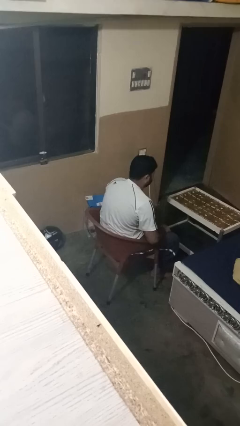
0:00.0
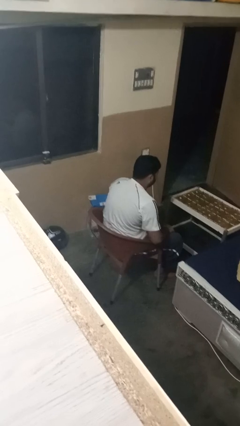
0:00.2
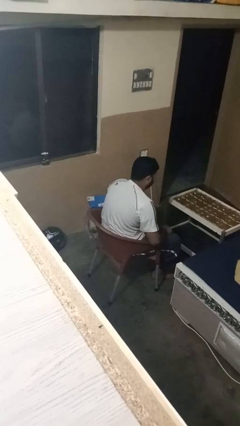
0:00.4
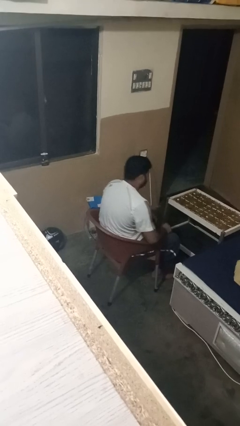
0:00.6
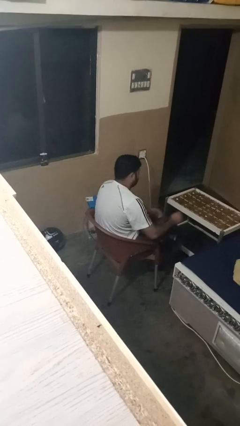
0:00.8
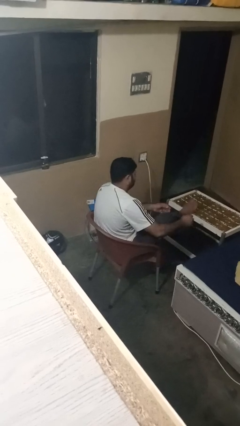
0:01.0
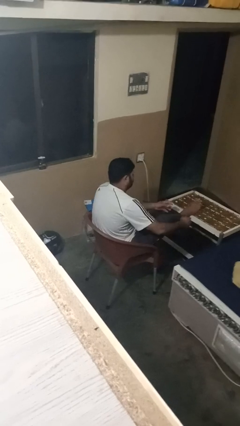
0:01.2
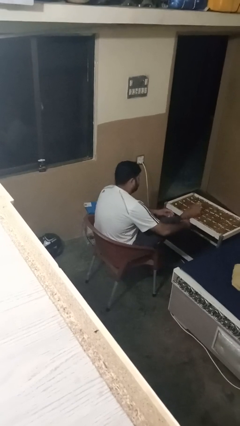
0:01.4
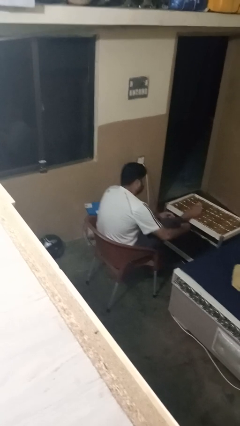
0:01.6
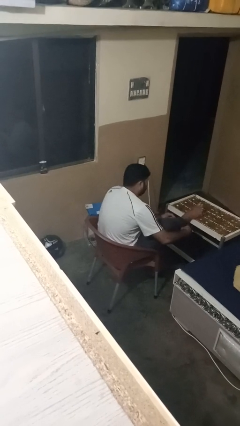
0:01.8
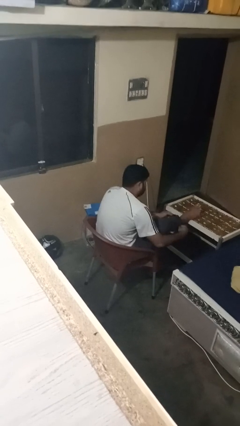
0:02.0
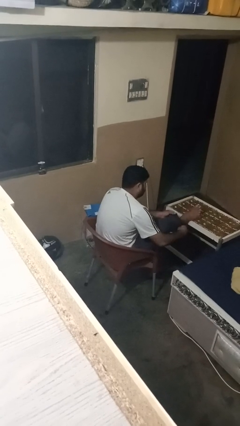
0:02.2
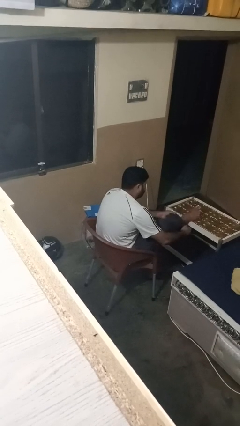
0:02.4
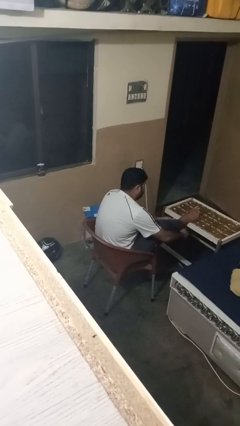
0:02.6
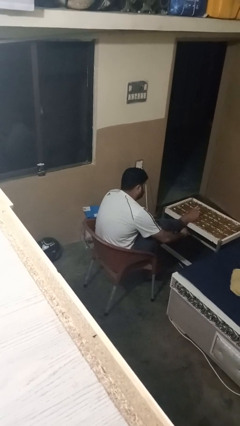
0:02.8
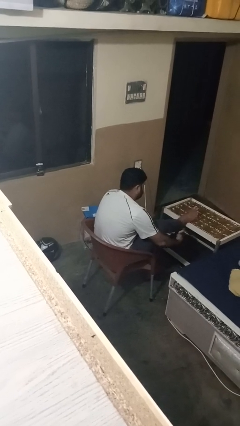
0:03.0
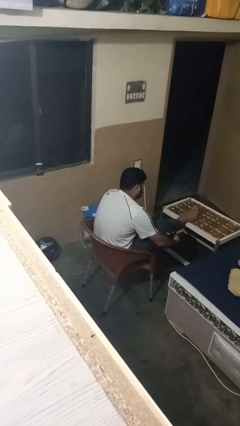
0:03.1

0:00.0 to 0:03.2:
person hikes up pants

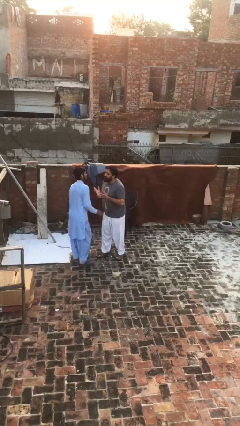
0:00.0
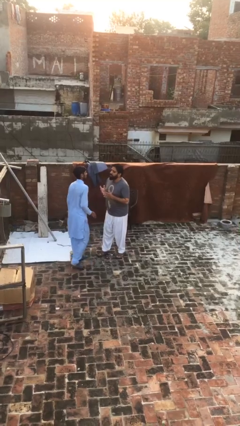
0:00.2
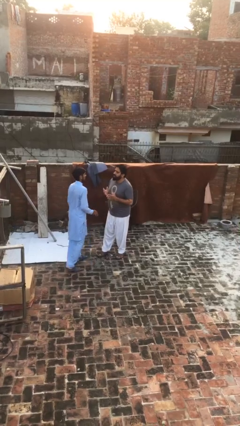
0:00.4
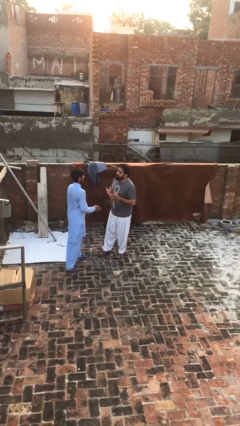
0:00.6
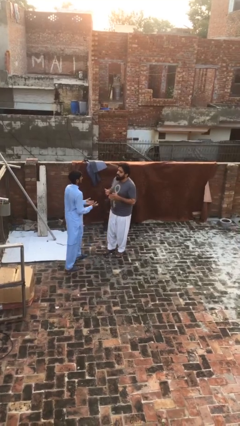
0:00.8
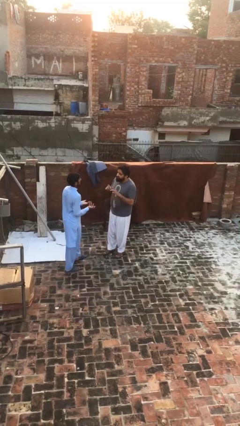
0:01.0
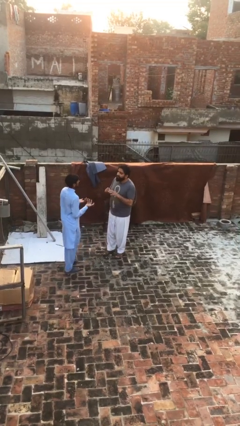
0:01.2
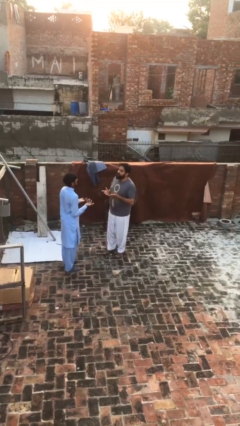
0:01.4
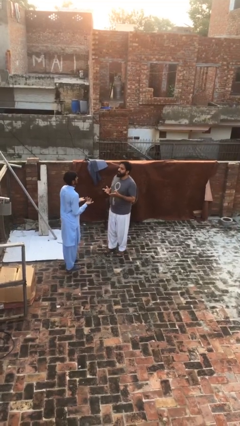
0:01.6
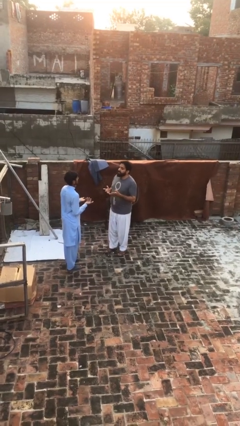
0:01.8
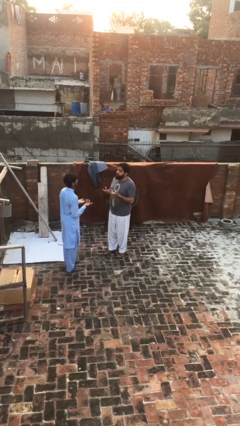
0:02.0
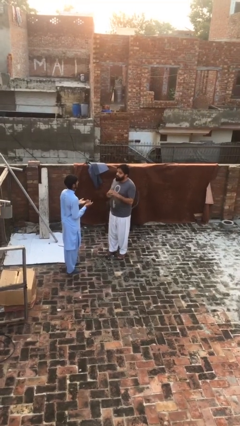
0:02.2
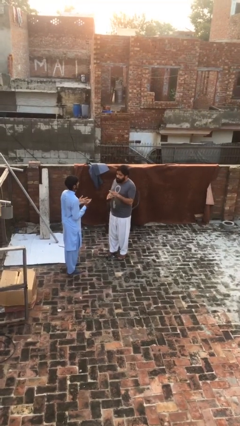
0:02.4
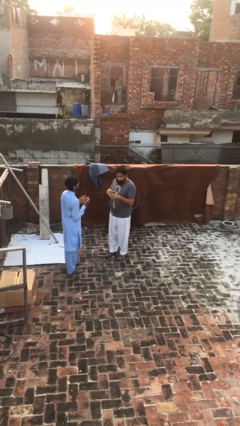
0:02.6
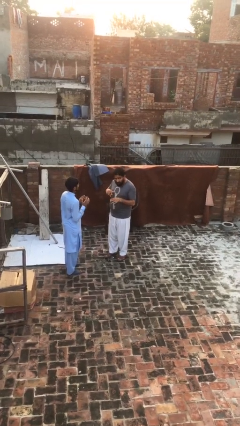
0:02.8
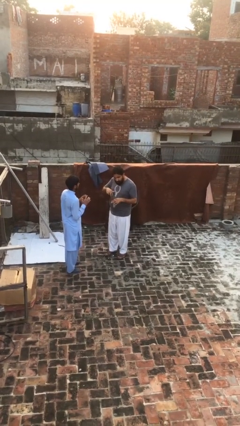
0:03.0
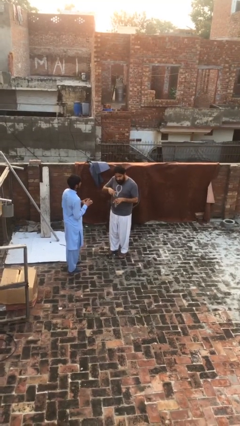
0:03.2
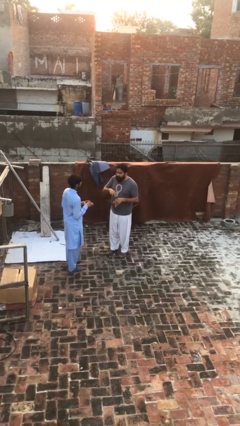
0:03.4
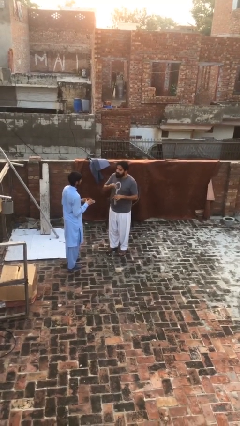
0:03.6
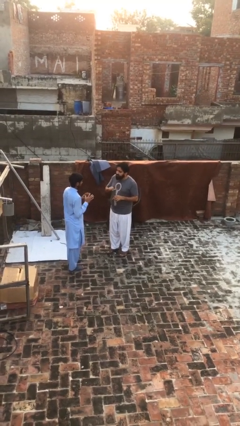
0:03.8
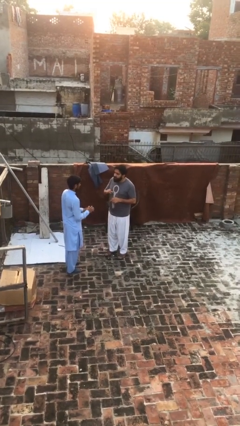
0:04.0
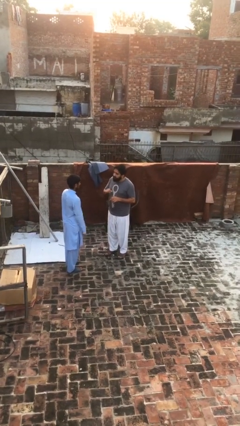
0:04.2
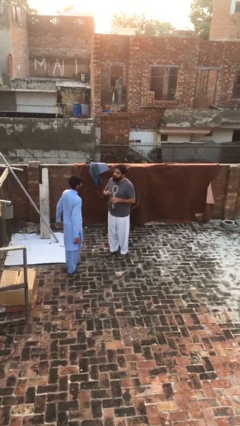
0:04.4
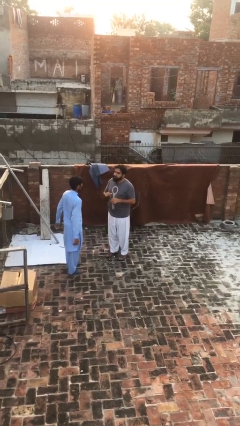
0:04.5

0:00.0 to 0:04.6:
person talks to person

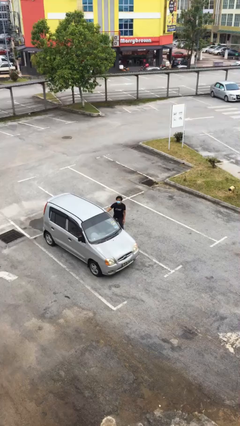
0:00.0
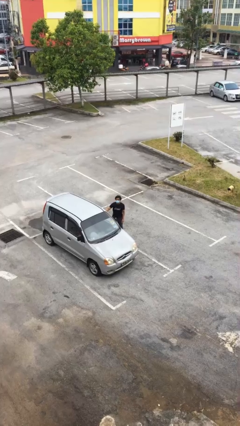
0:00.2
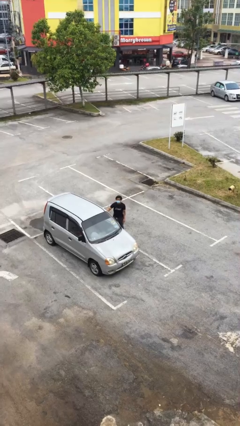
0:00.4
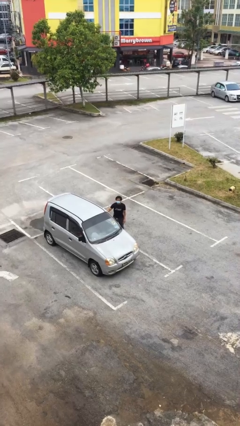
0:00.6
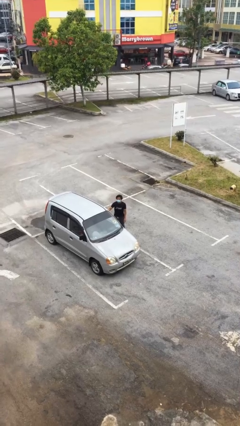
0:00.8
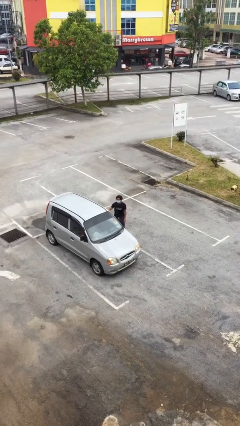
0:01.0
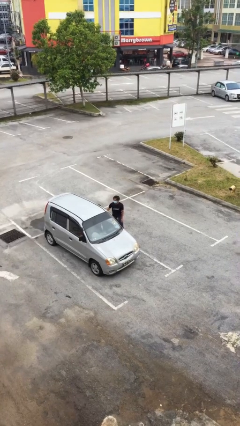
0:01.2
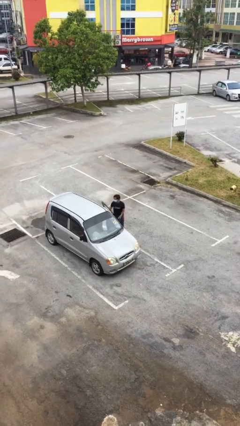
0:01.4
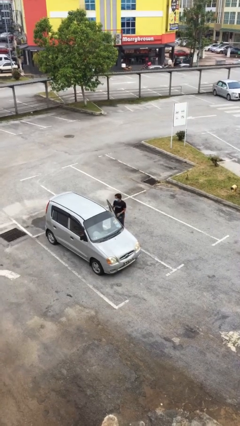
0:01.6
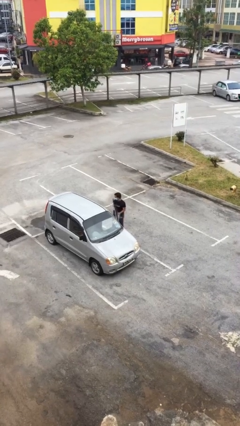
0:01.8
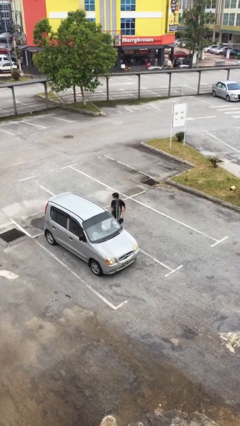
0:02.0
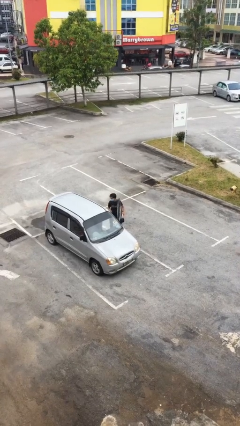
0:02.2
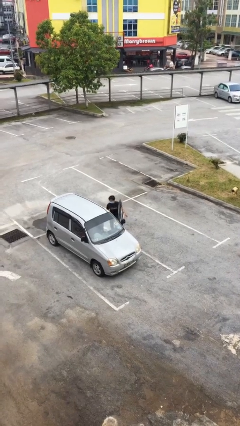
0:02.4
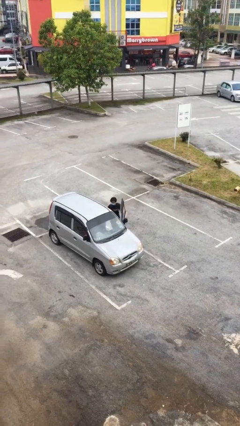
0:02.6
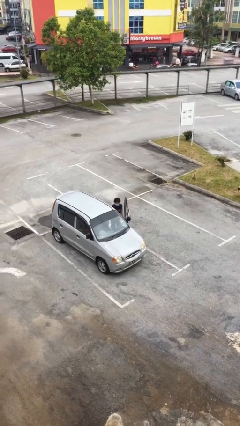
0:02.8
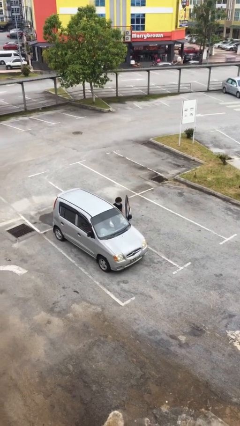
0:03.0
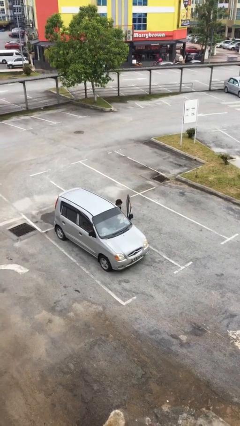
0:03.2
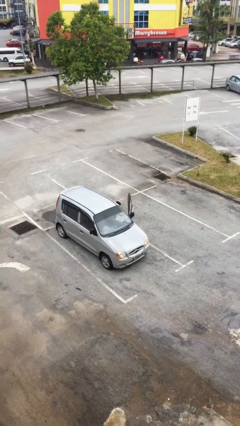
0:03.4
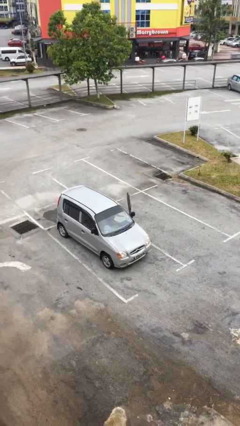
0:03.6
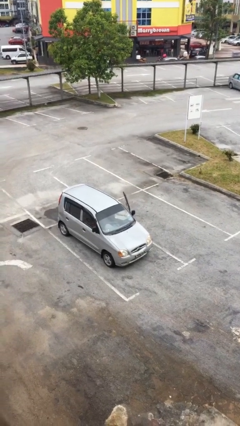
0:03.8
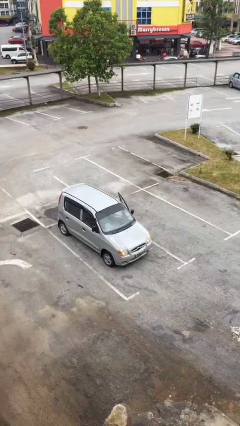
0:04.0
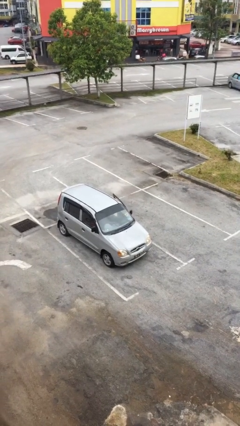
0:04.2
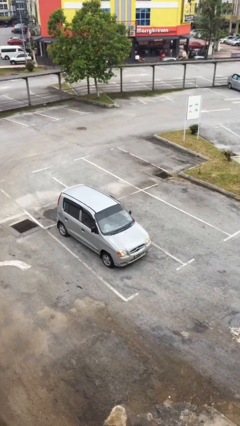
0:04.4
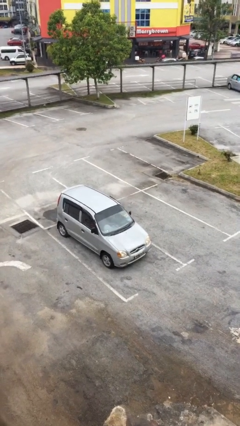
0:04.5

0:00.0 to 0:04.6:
person enters car

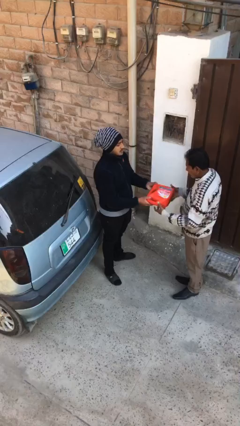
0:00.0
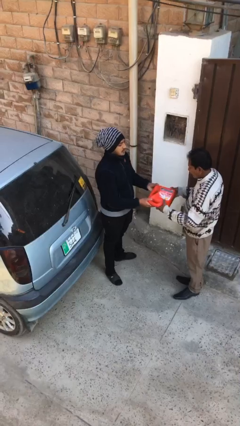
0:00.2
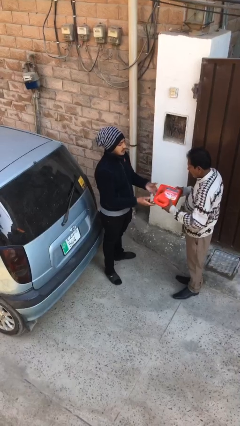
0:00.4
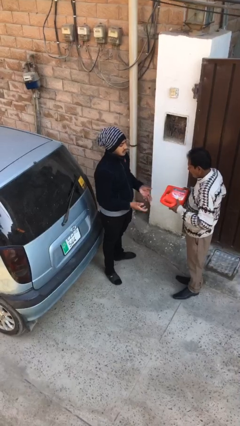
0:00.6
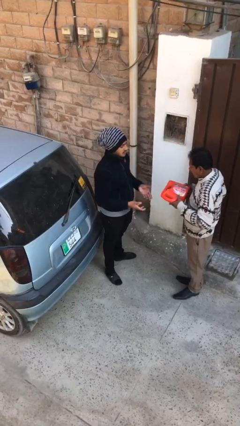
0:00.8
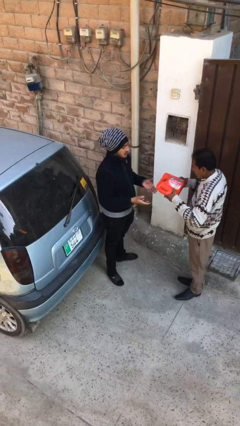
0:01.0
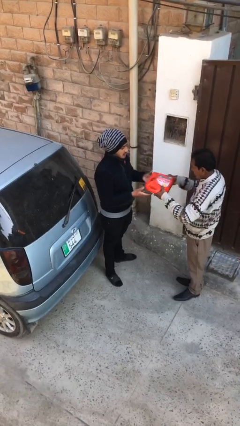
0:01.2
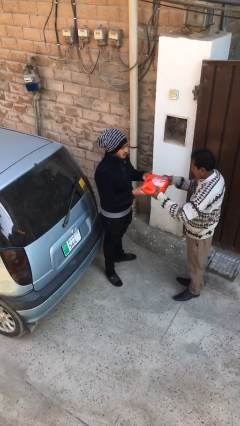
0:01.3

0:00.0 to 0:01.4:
person transfers object to person

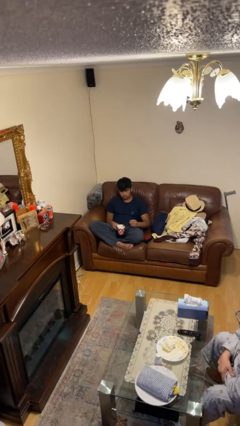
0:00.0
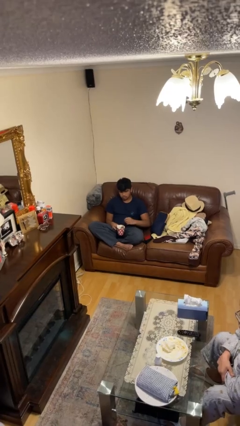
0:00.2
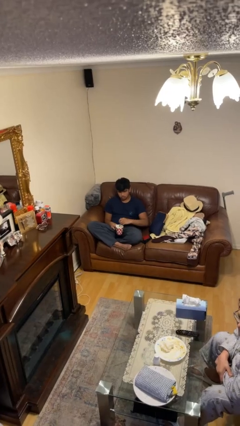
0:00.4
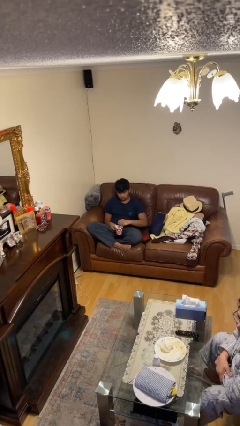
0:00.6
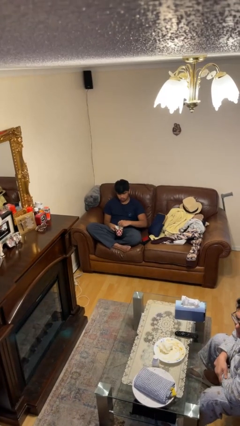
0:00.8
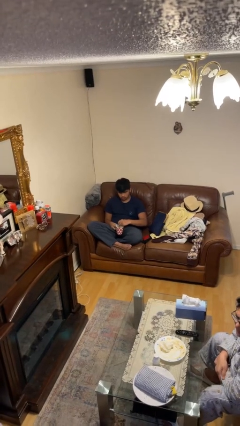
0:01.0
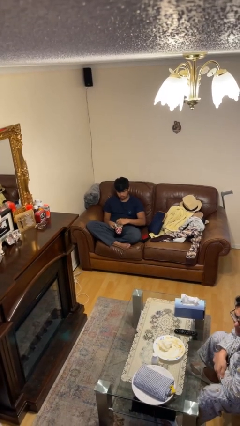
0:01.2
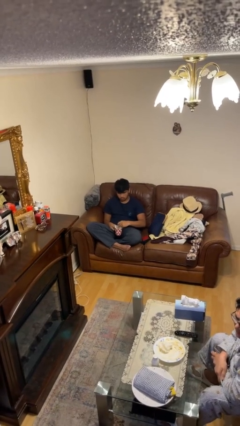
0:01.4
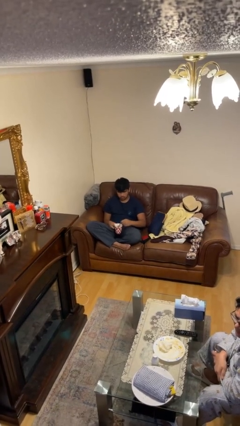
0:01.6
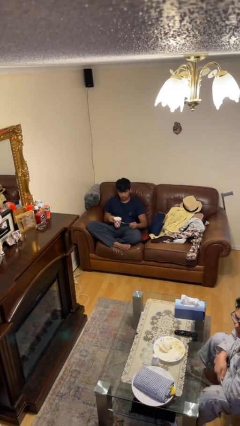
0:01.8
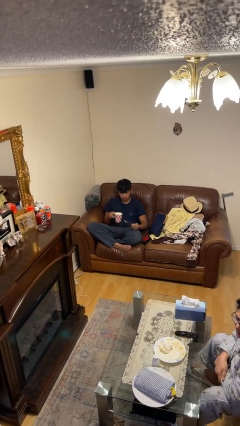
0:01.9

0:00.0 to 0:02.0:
person stirs mug

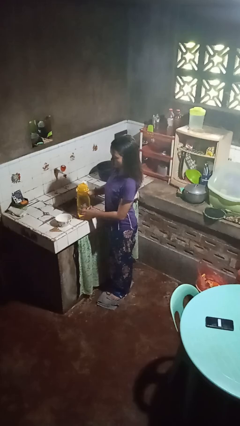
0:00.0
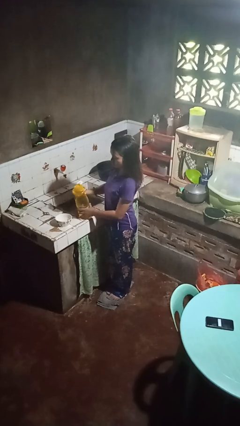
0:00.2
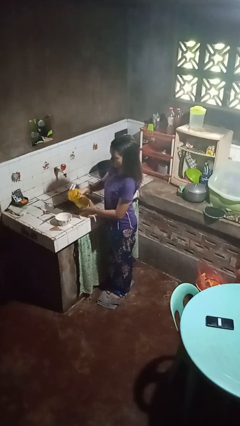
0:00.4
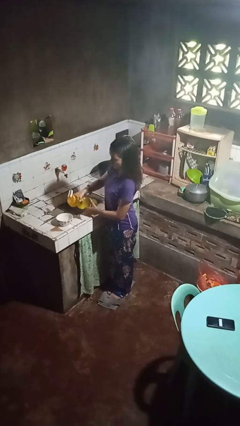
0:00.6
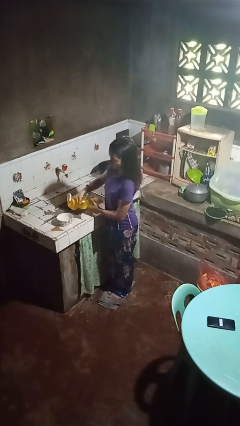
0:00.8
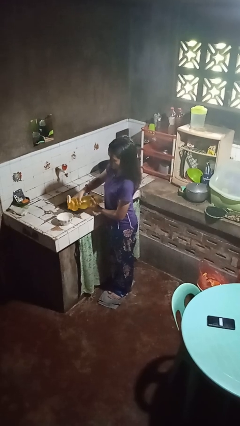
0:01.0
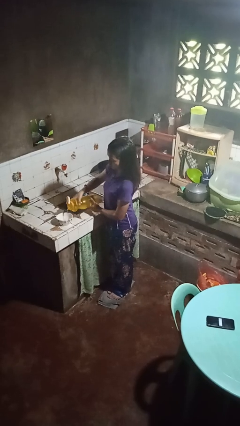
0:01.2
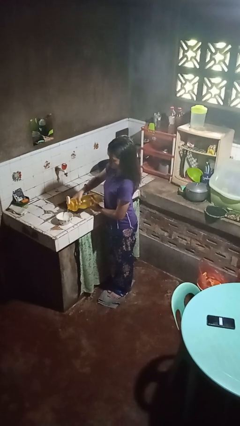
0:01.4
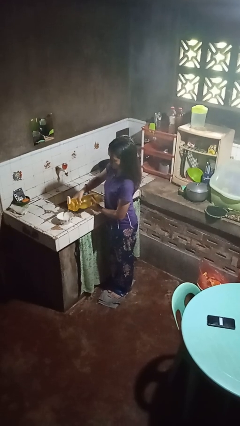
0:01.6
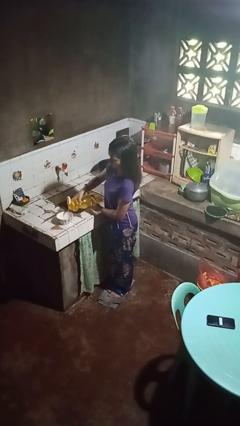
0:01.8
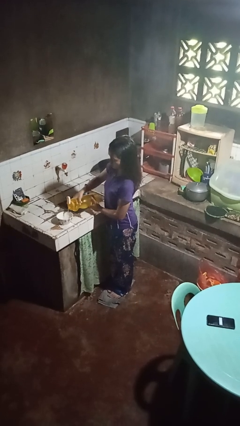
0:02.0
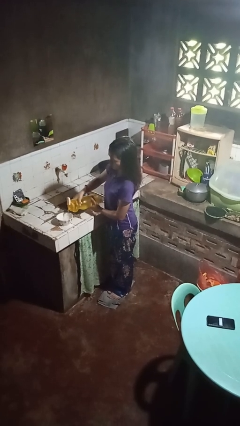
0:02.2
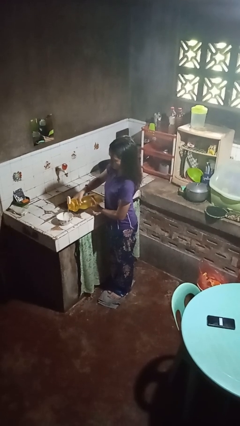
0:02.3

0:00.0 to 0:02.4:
person pours into bowl
